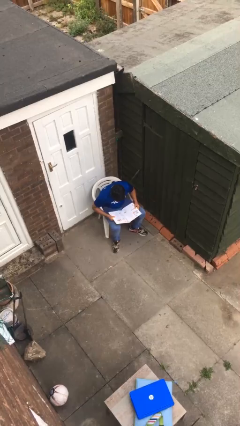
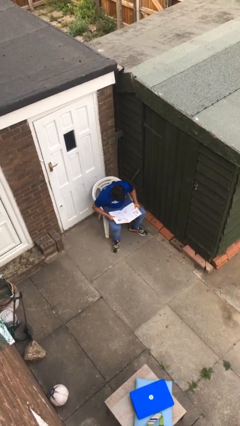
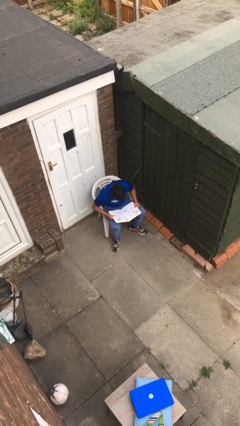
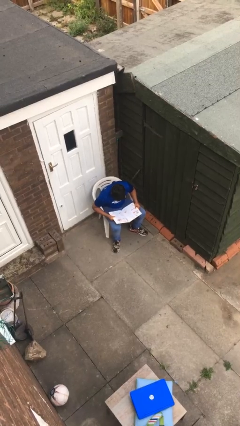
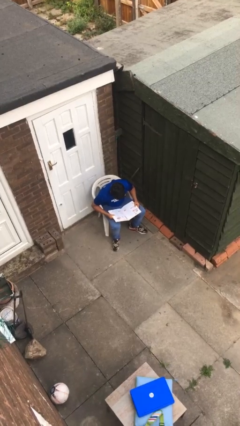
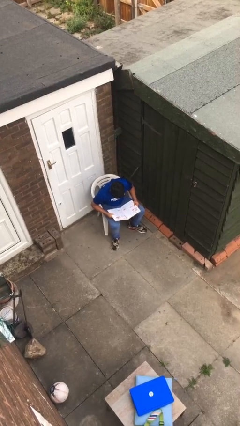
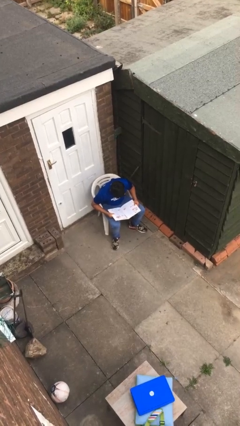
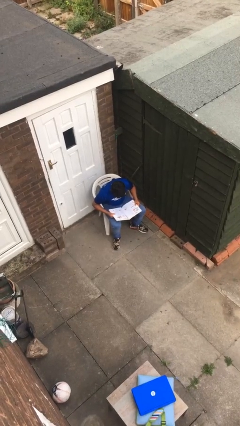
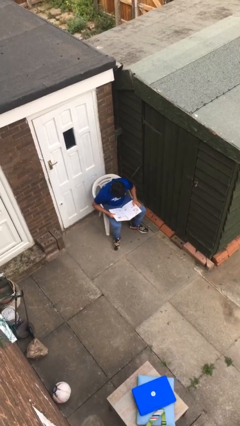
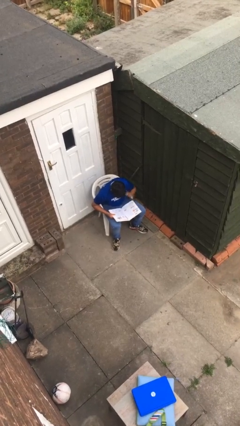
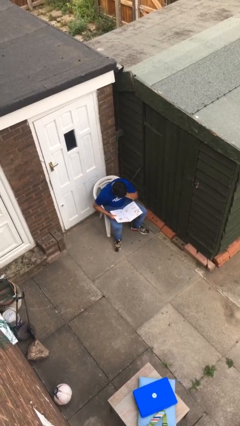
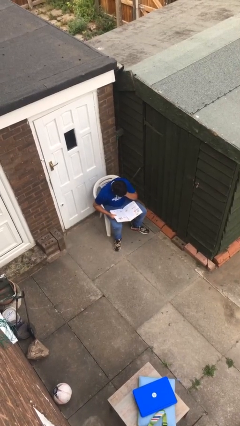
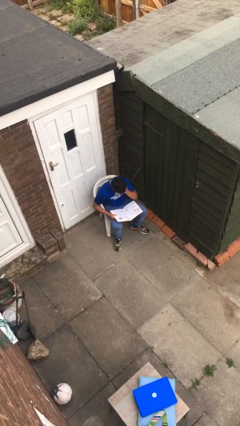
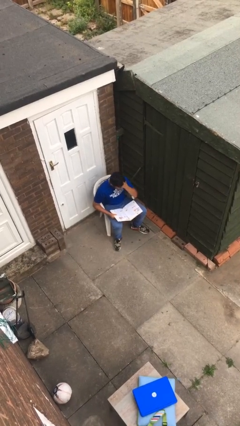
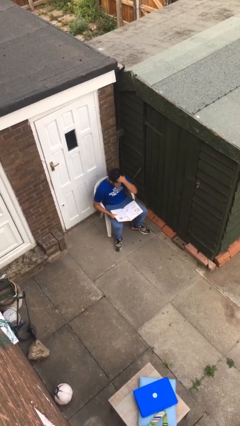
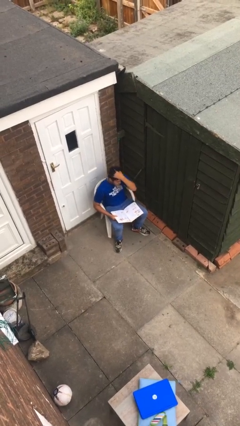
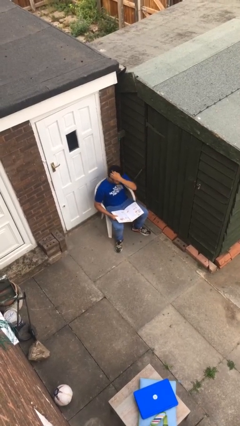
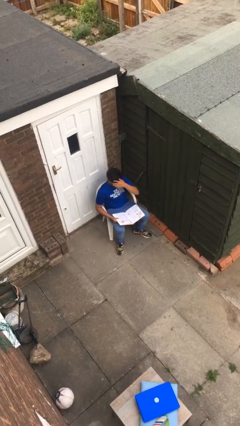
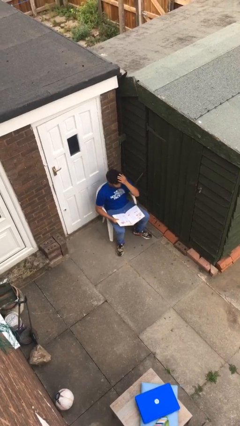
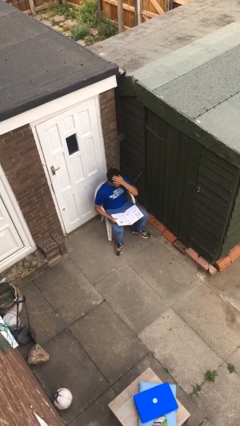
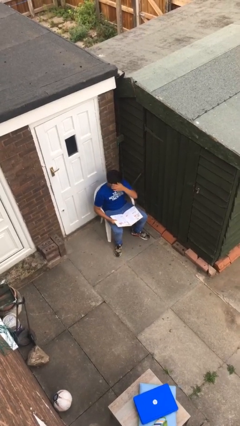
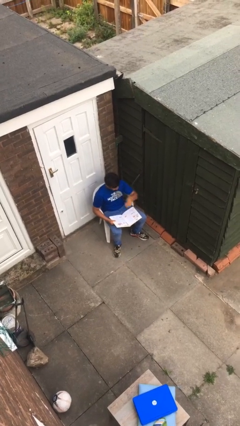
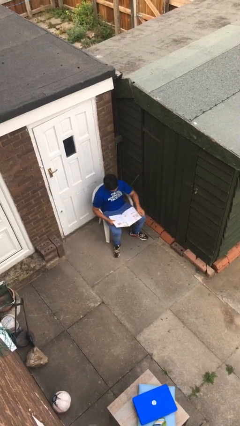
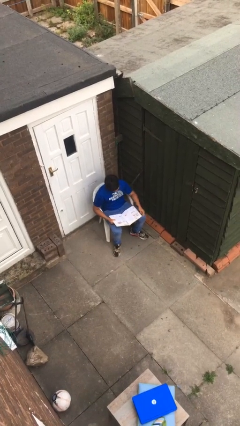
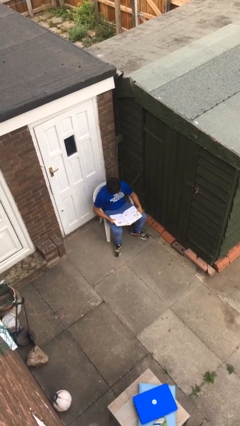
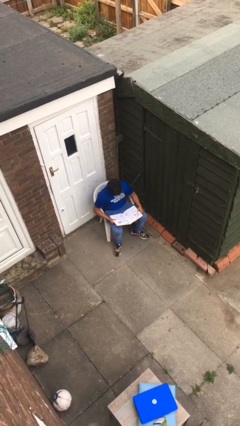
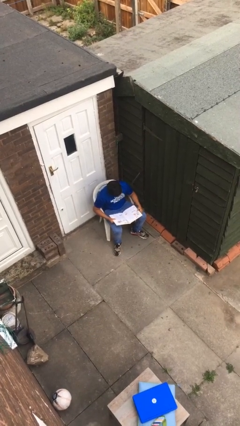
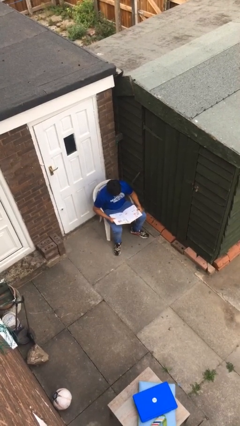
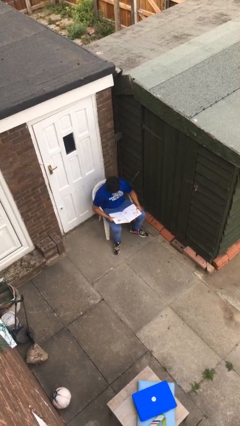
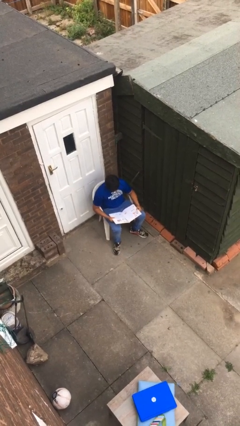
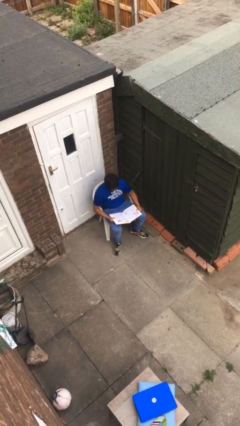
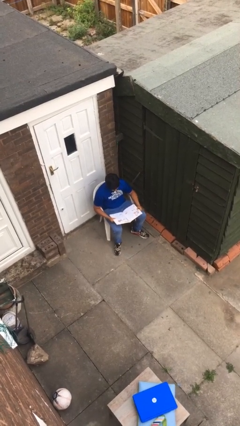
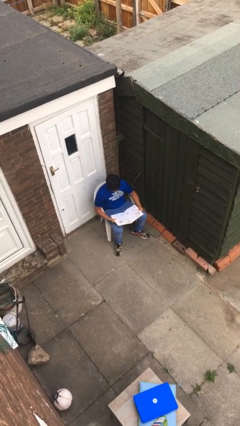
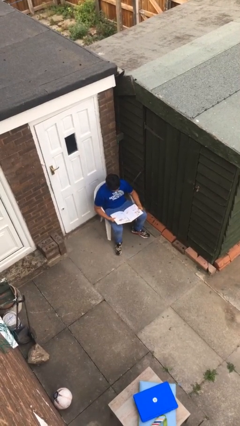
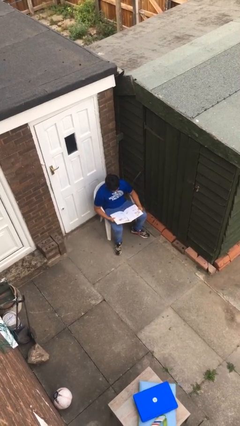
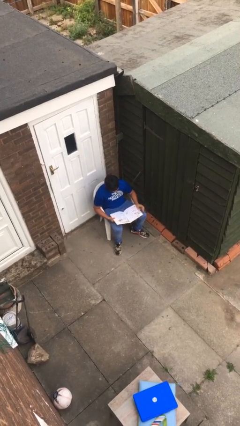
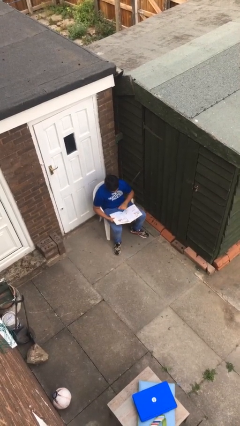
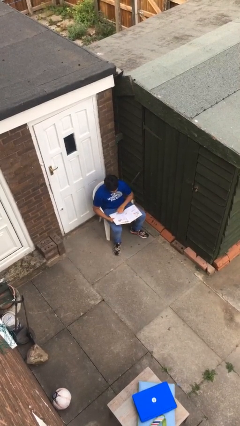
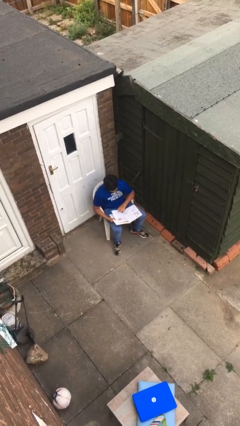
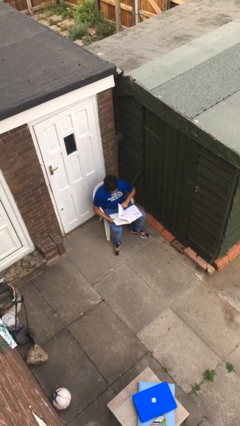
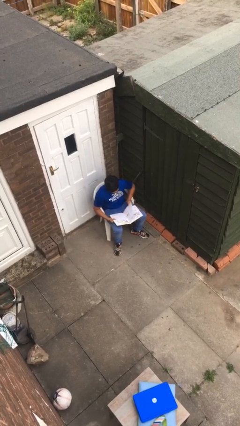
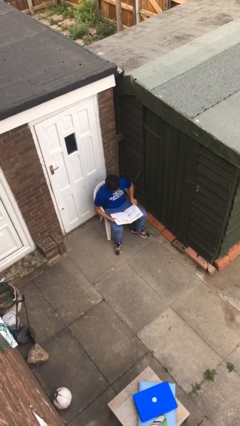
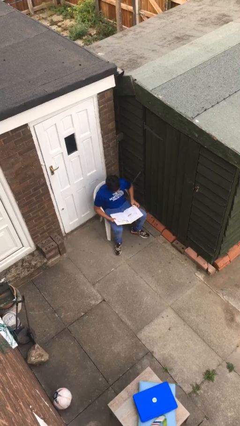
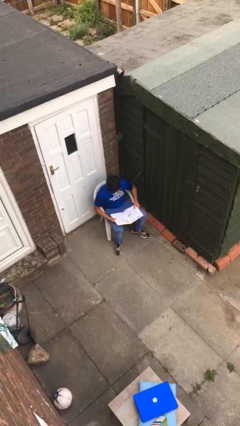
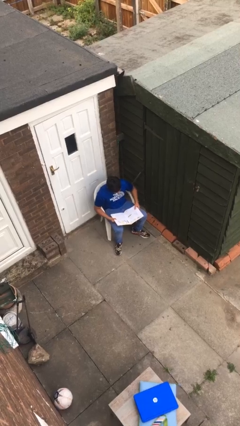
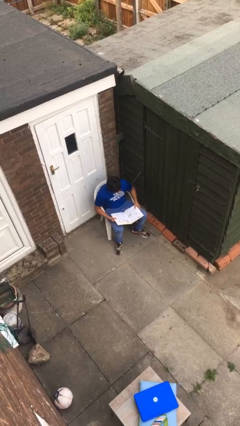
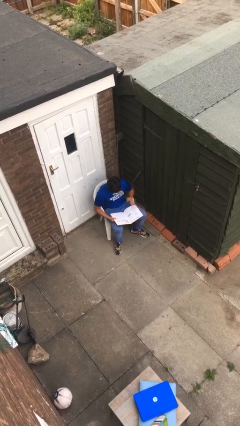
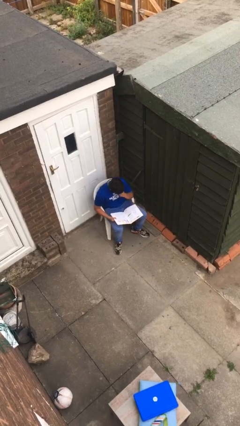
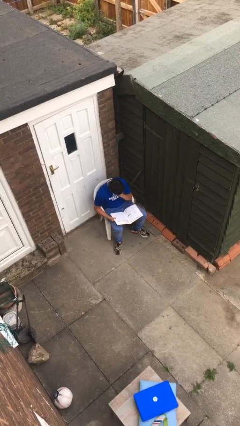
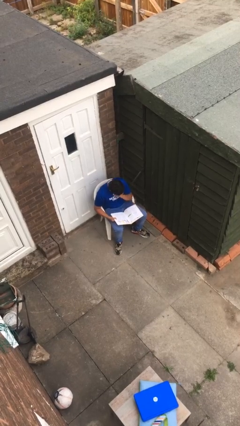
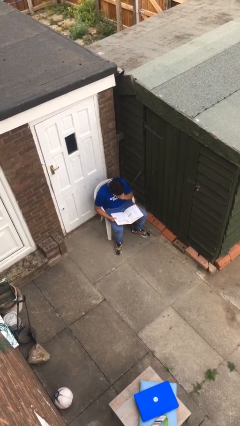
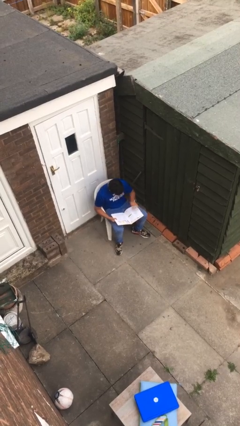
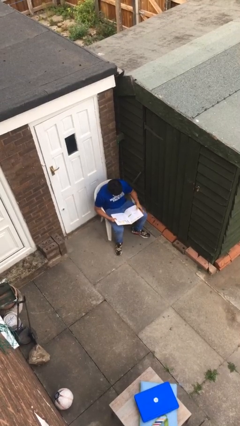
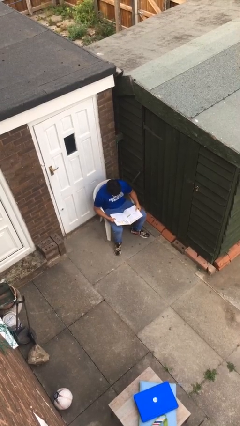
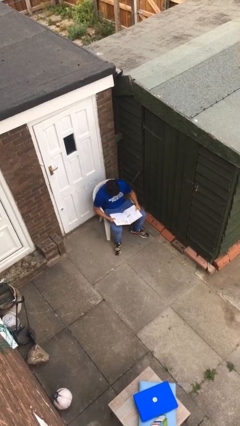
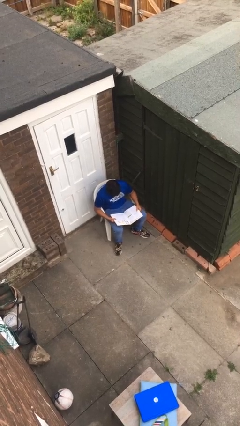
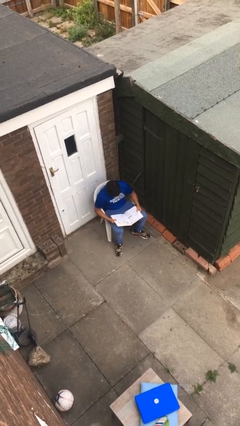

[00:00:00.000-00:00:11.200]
person reads document

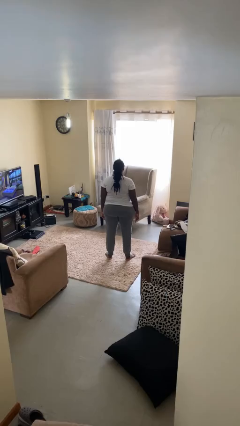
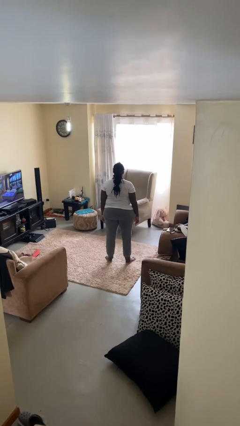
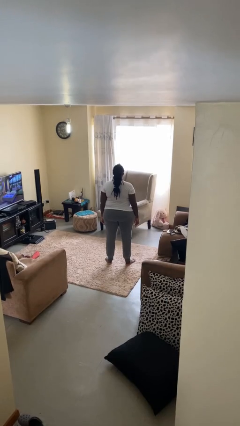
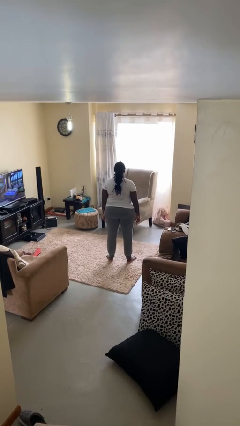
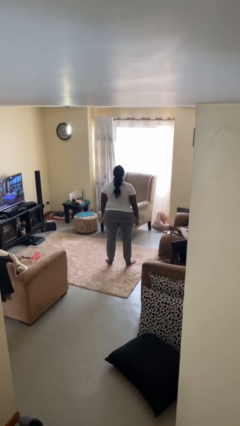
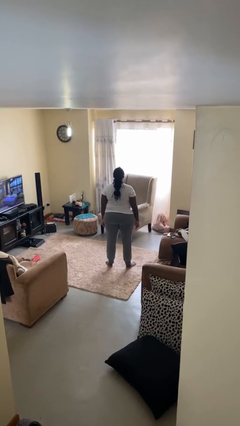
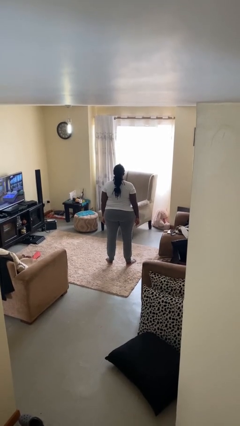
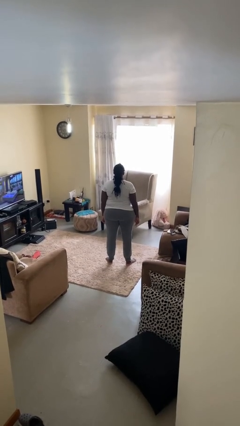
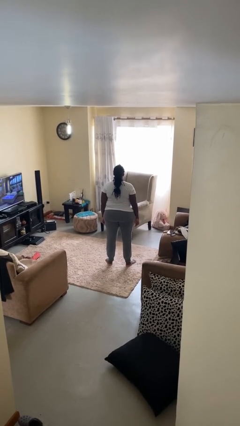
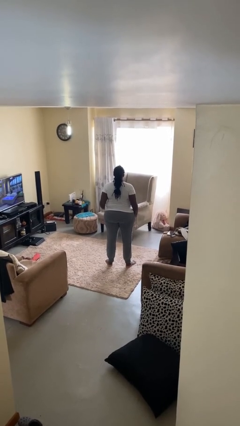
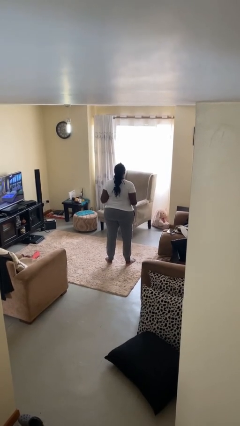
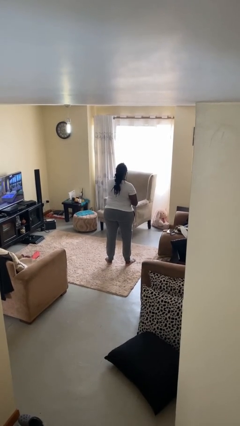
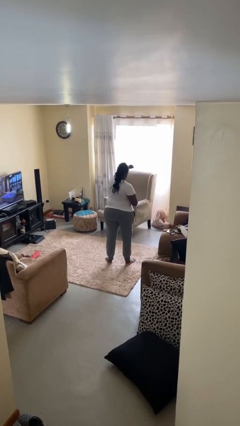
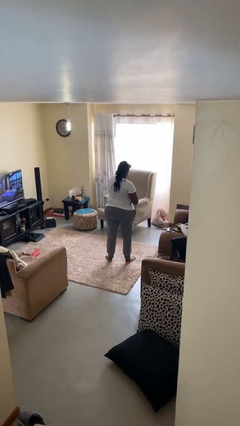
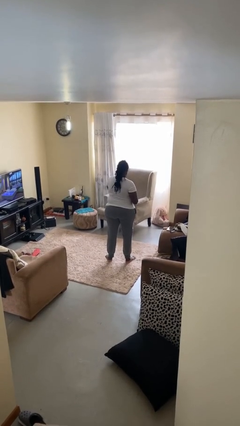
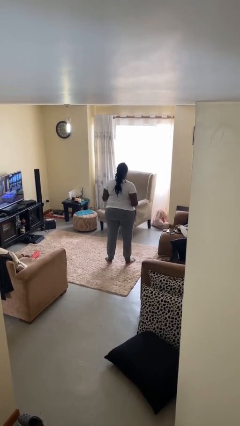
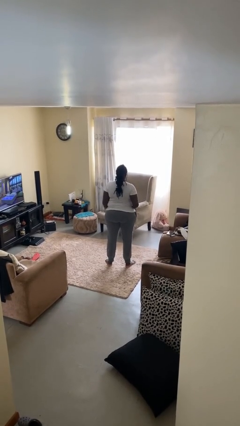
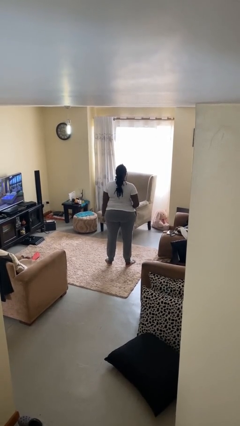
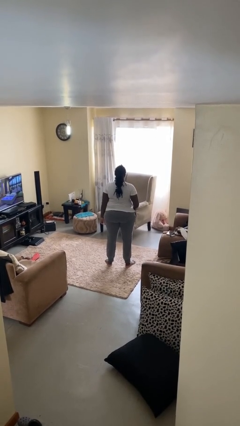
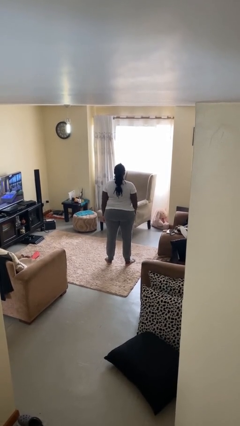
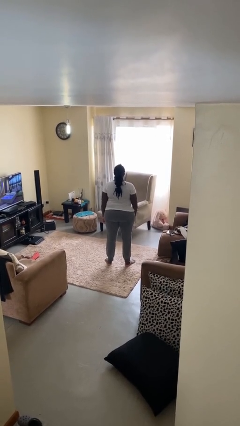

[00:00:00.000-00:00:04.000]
person punches

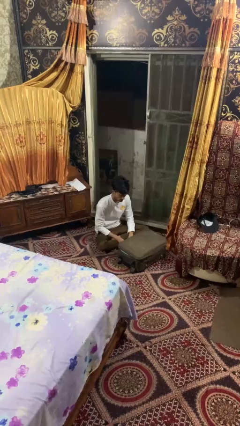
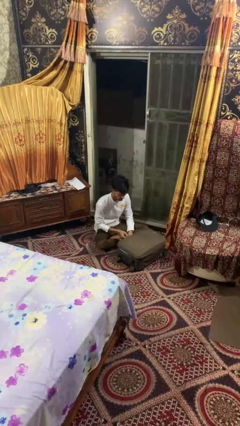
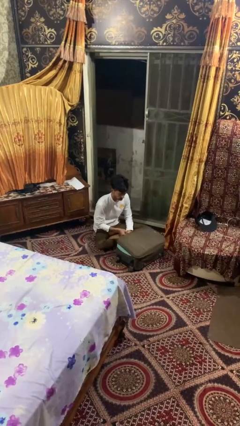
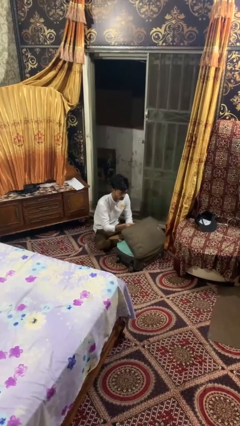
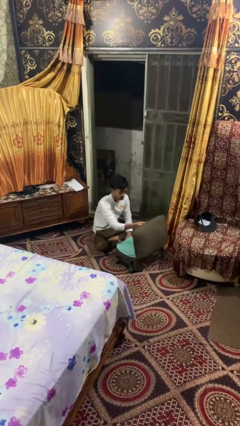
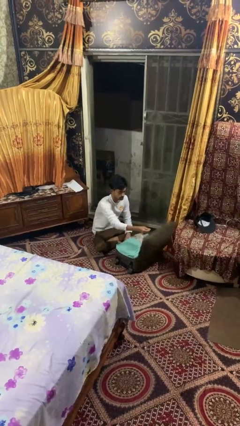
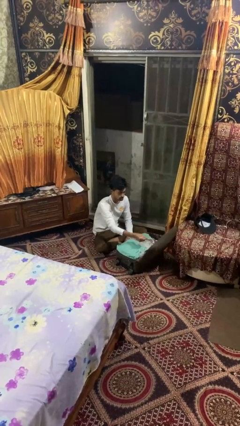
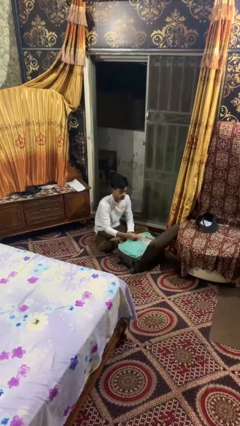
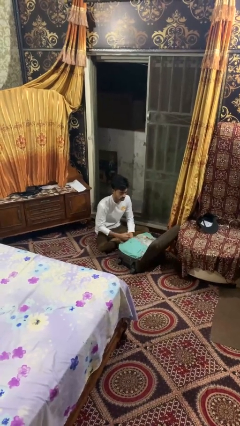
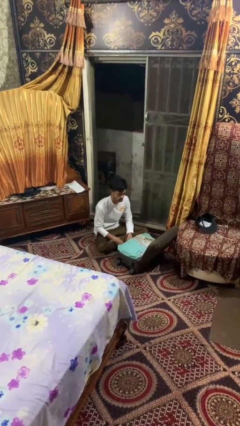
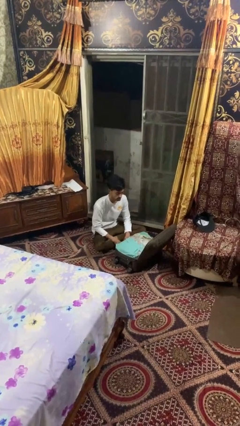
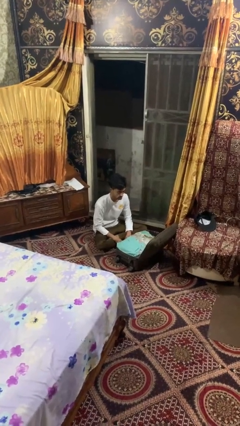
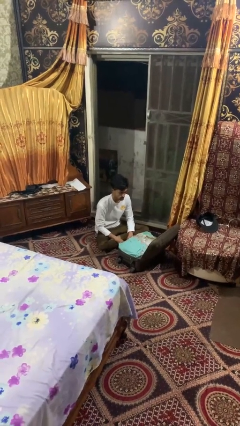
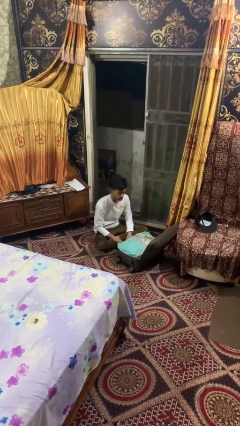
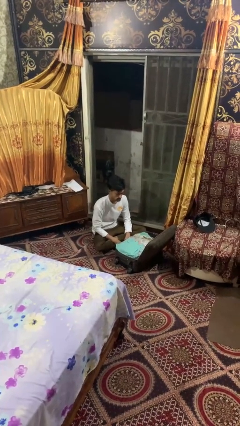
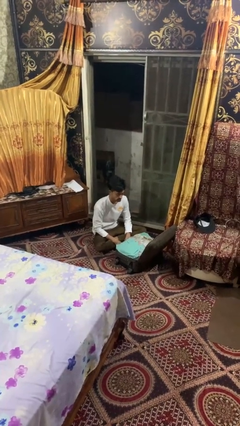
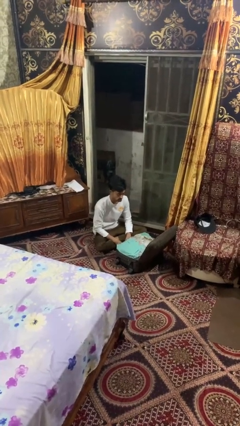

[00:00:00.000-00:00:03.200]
person opens suitcase
